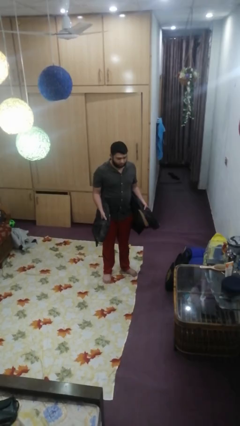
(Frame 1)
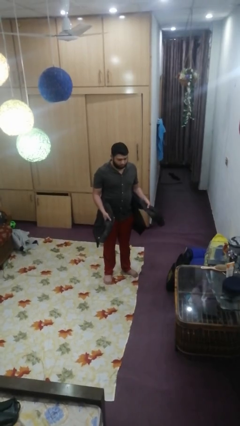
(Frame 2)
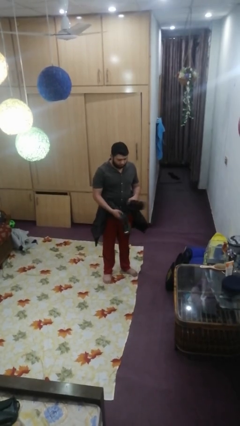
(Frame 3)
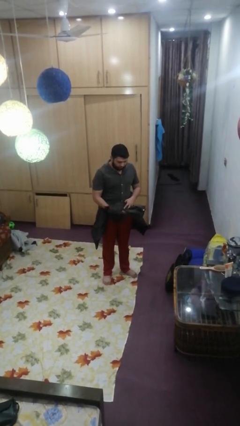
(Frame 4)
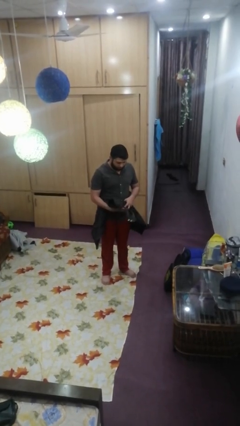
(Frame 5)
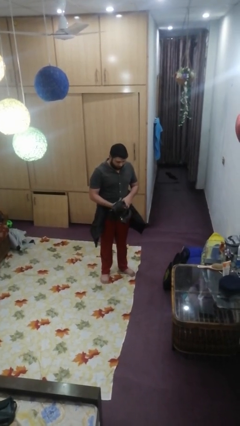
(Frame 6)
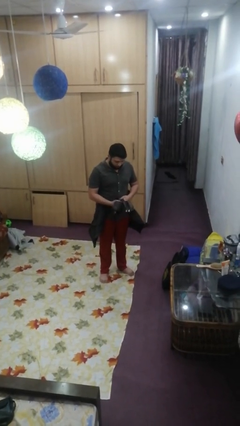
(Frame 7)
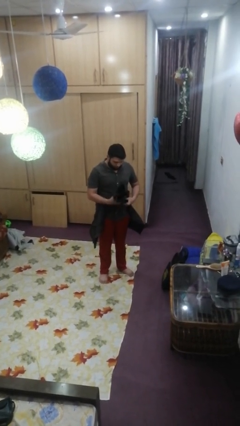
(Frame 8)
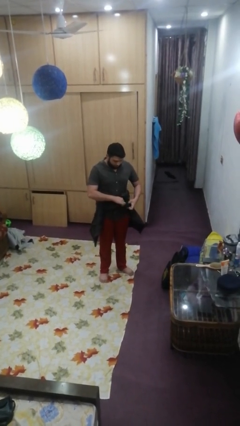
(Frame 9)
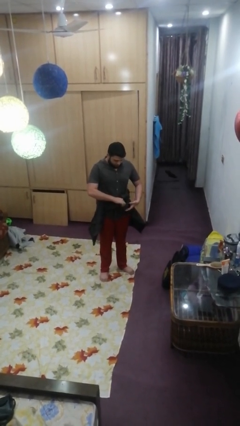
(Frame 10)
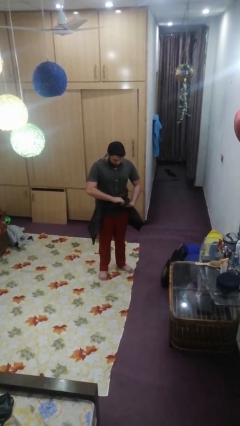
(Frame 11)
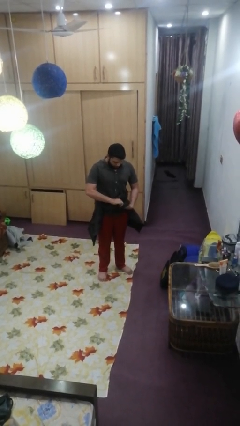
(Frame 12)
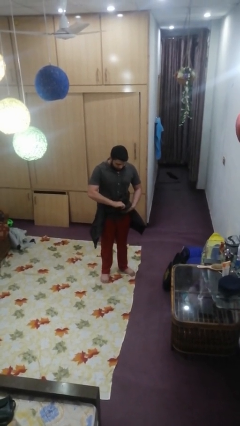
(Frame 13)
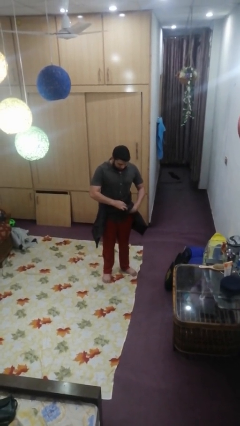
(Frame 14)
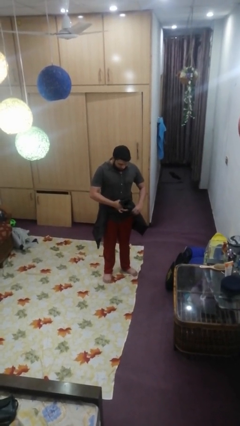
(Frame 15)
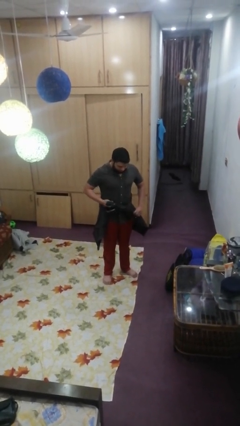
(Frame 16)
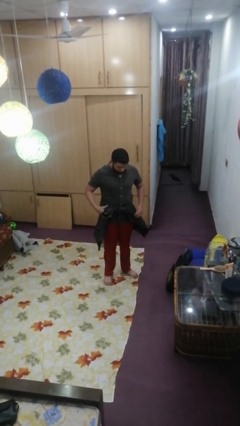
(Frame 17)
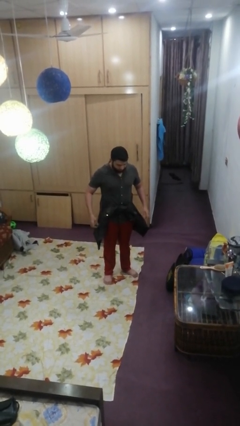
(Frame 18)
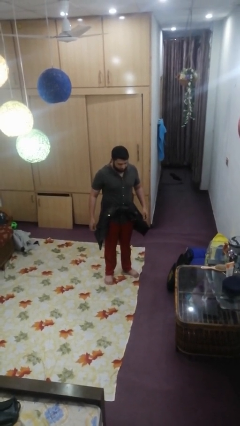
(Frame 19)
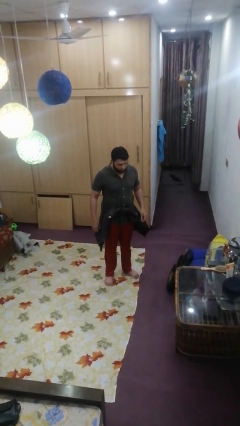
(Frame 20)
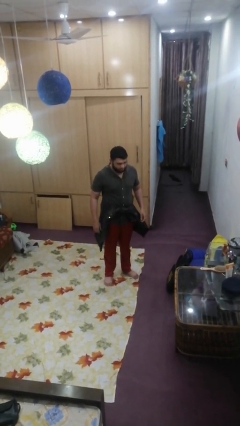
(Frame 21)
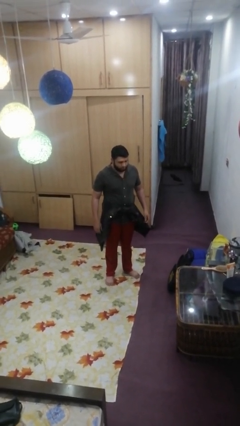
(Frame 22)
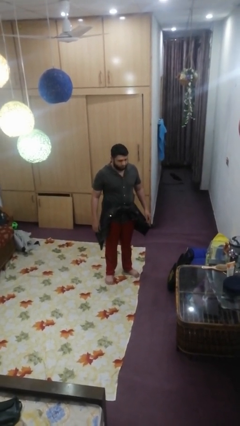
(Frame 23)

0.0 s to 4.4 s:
person ties jacket around waist

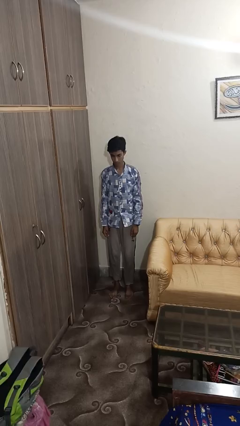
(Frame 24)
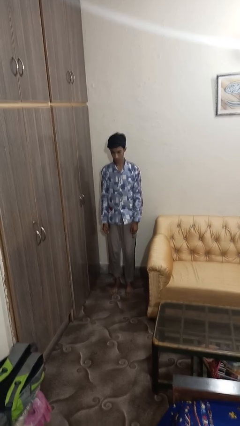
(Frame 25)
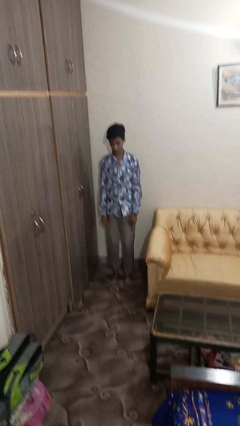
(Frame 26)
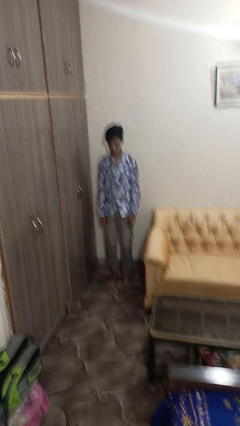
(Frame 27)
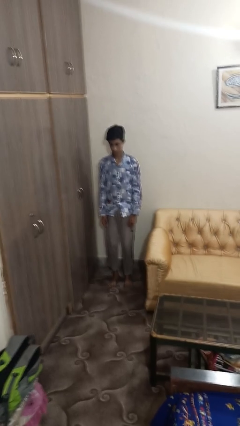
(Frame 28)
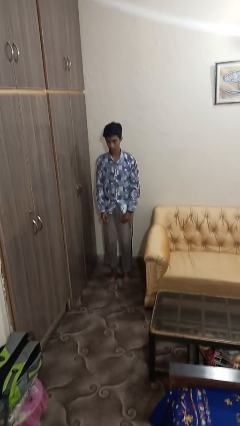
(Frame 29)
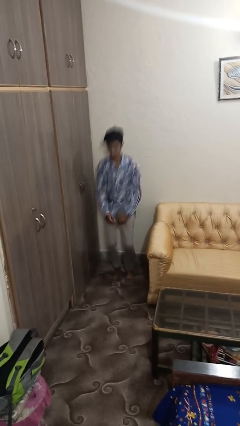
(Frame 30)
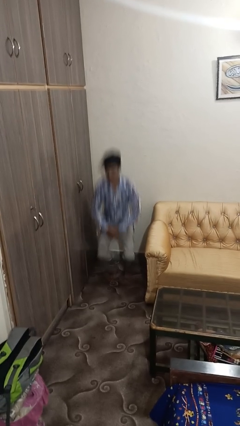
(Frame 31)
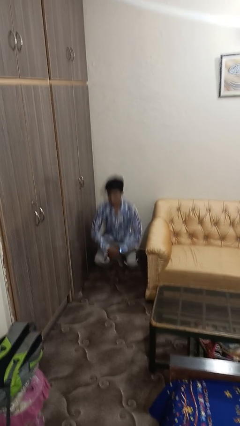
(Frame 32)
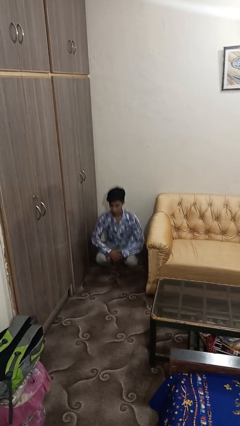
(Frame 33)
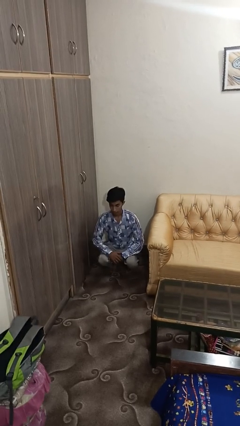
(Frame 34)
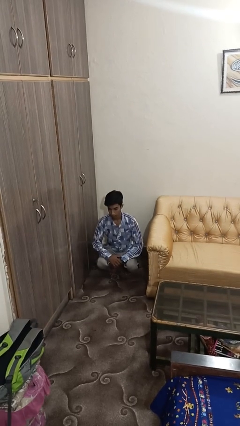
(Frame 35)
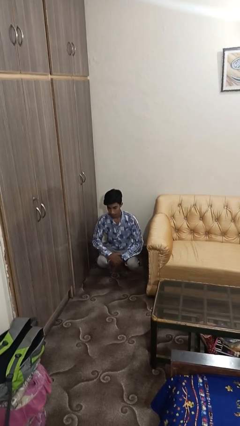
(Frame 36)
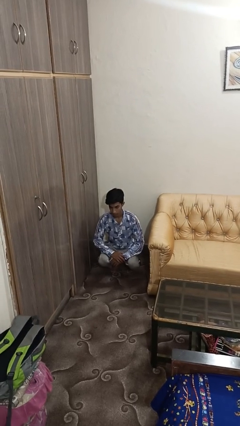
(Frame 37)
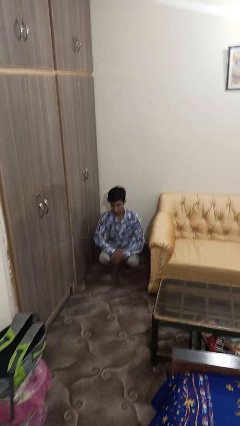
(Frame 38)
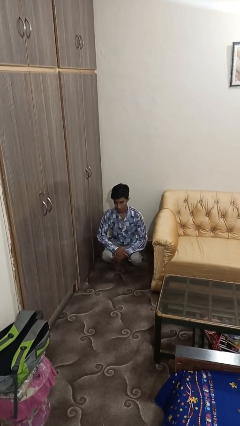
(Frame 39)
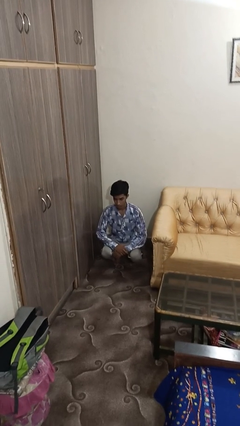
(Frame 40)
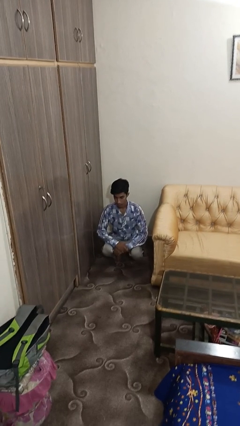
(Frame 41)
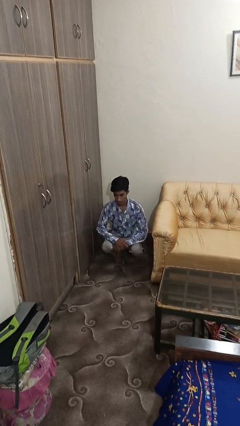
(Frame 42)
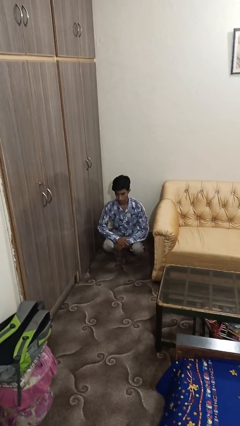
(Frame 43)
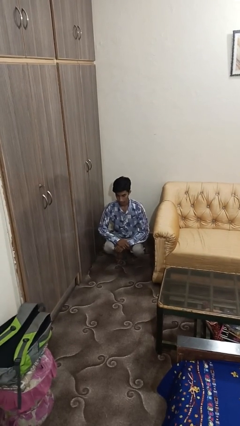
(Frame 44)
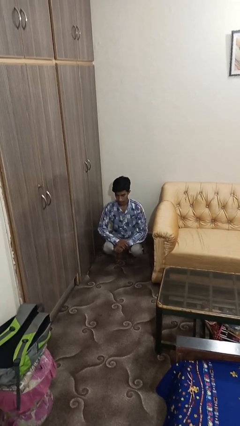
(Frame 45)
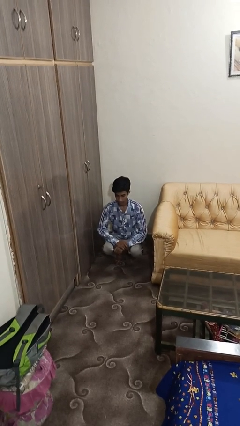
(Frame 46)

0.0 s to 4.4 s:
person squats

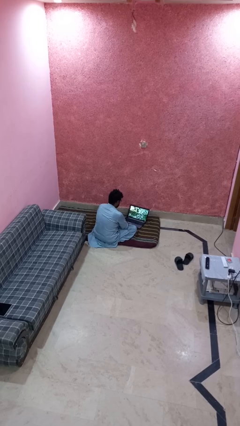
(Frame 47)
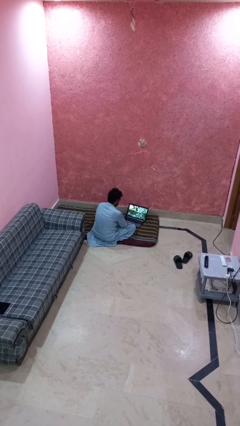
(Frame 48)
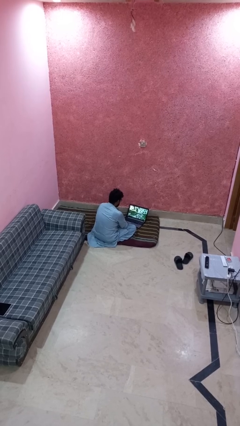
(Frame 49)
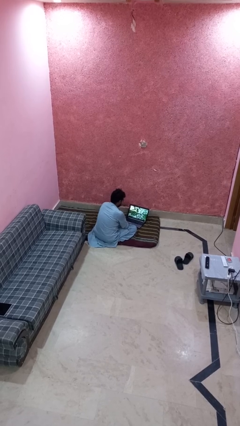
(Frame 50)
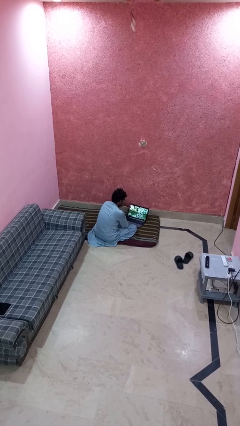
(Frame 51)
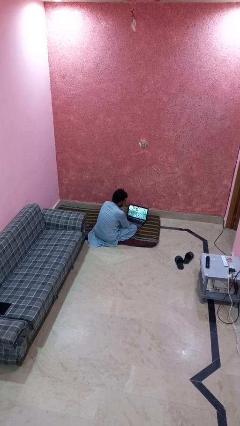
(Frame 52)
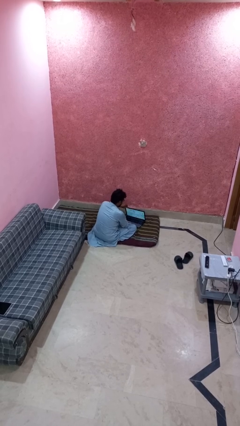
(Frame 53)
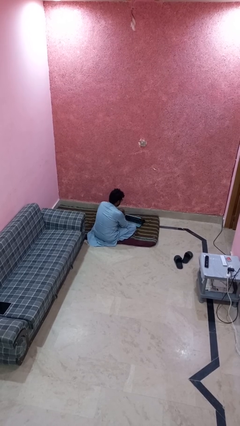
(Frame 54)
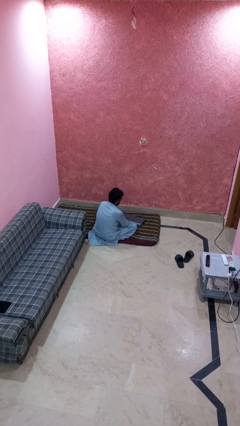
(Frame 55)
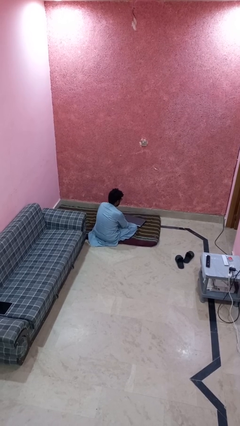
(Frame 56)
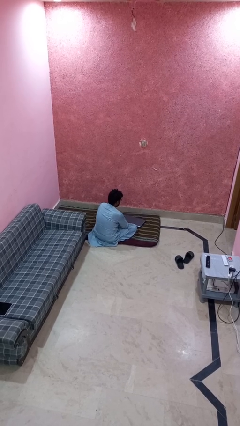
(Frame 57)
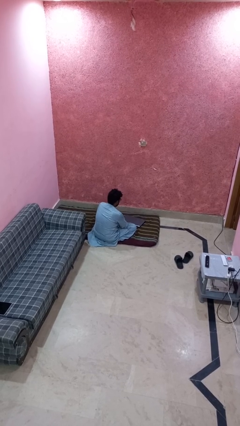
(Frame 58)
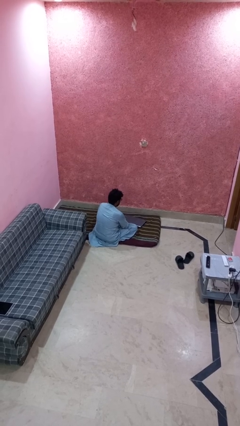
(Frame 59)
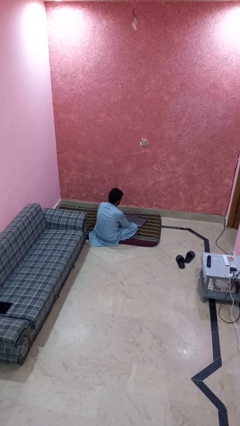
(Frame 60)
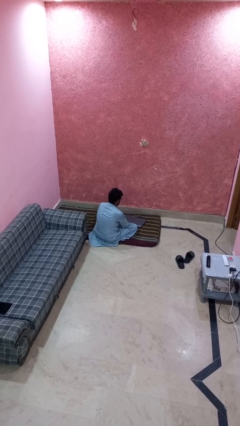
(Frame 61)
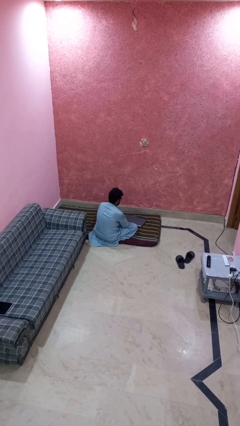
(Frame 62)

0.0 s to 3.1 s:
person closes laptop

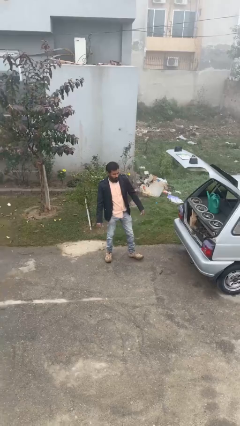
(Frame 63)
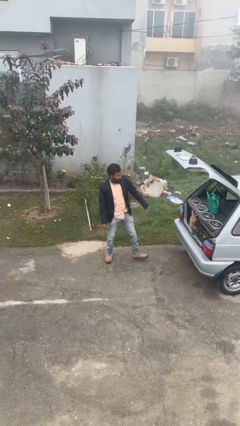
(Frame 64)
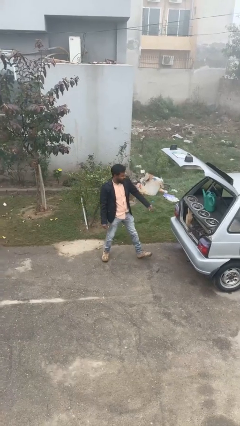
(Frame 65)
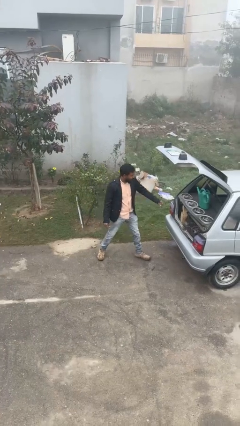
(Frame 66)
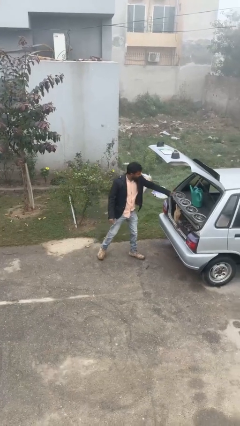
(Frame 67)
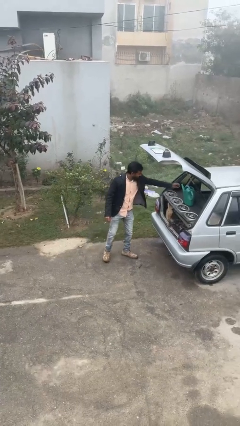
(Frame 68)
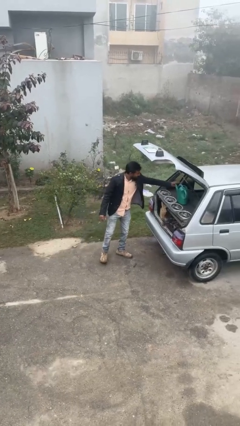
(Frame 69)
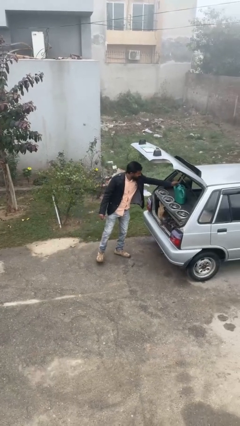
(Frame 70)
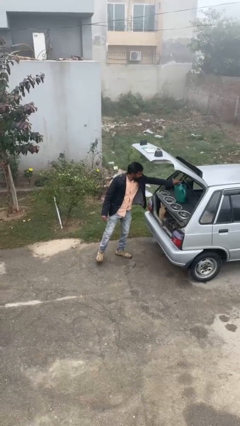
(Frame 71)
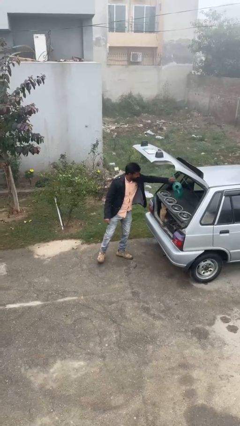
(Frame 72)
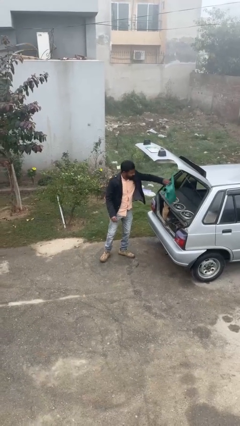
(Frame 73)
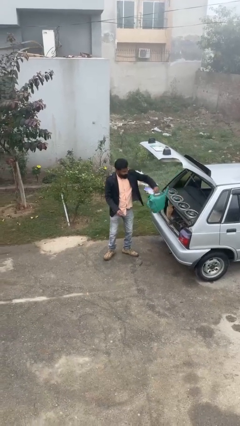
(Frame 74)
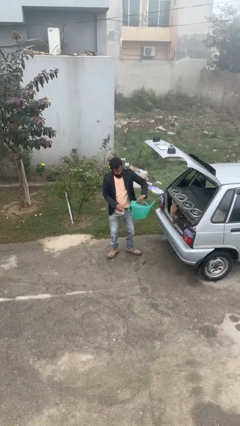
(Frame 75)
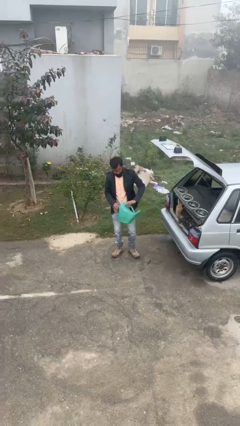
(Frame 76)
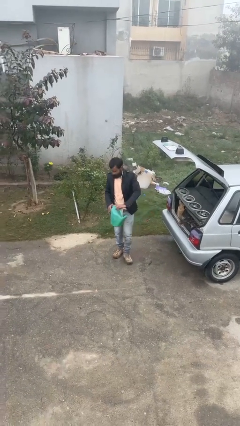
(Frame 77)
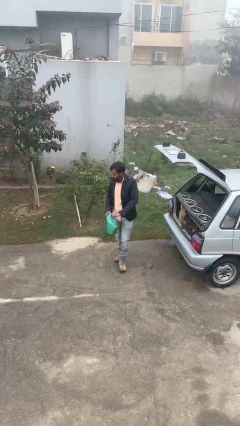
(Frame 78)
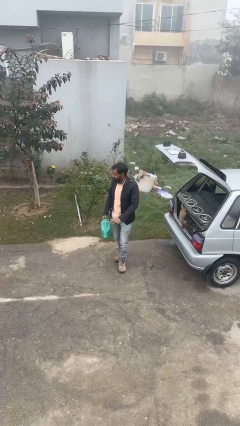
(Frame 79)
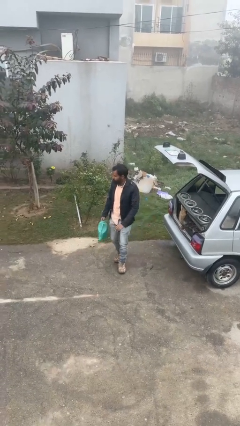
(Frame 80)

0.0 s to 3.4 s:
person unloads car

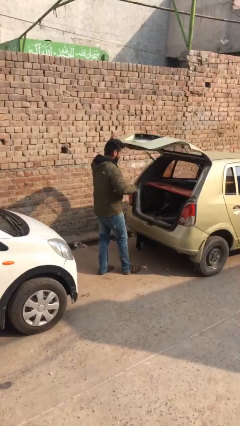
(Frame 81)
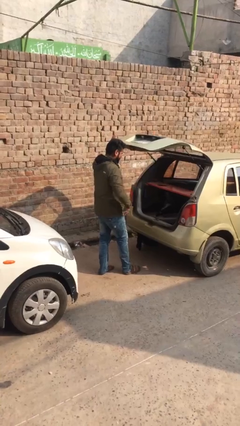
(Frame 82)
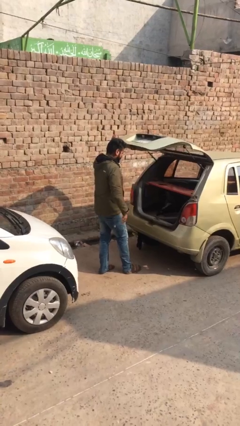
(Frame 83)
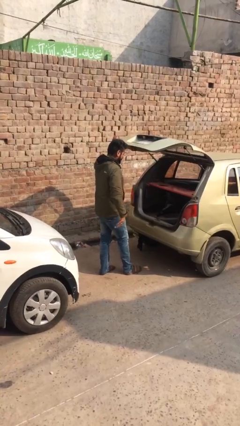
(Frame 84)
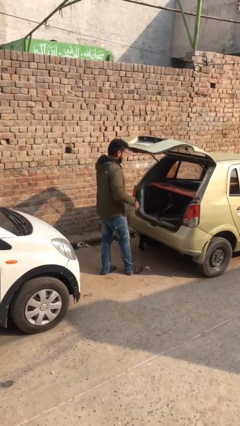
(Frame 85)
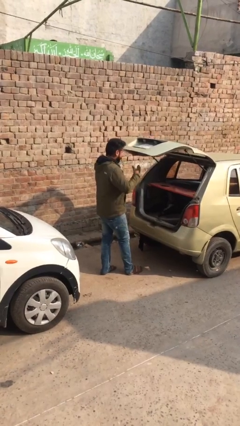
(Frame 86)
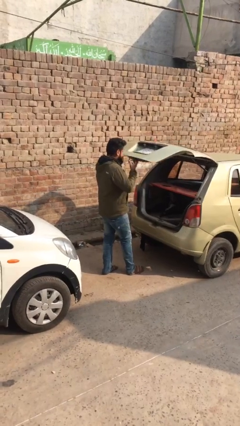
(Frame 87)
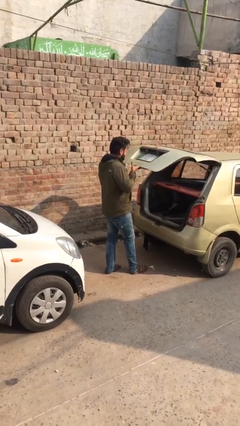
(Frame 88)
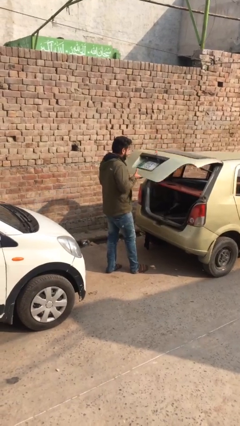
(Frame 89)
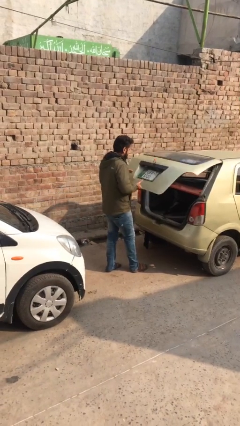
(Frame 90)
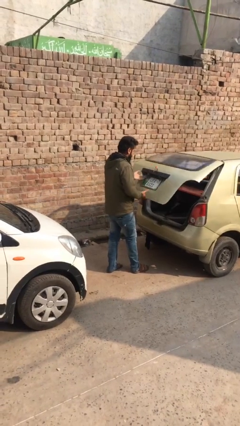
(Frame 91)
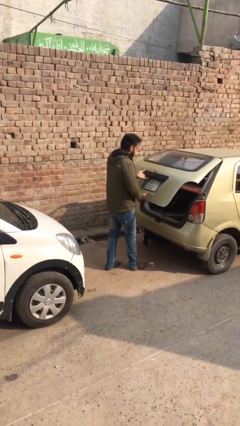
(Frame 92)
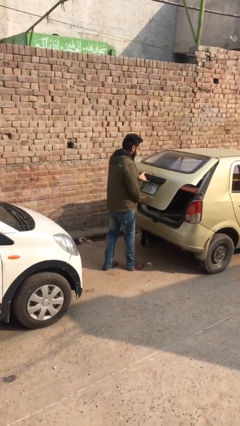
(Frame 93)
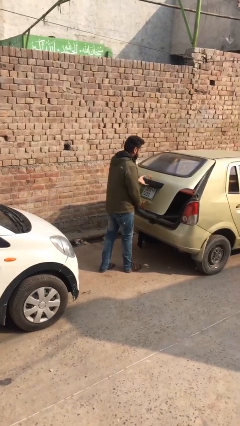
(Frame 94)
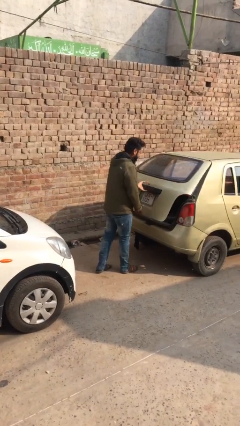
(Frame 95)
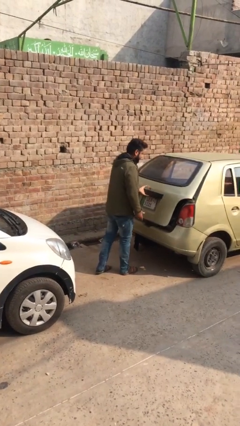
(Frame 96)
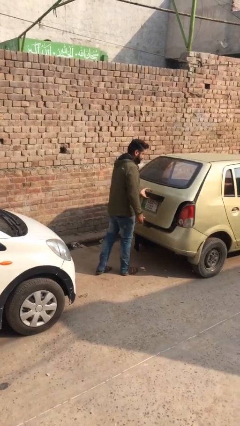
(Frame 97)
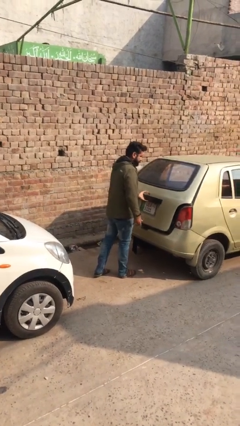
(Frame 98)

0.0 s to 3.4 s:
person closes car trunk
